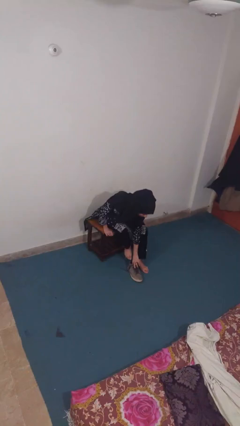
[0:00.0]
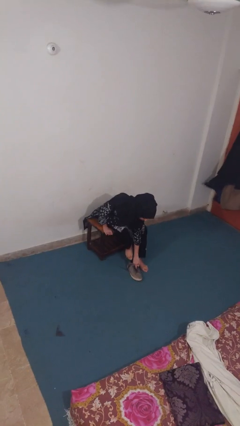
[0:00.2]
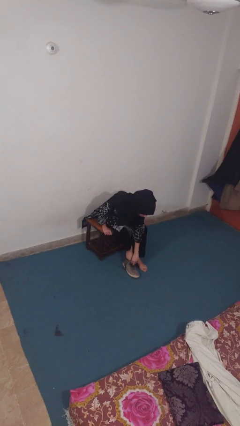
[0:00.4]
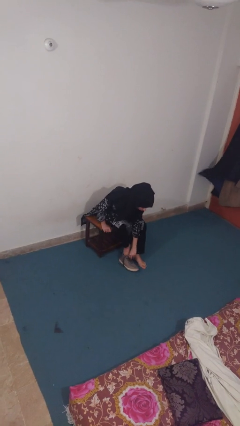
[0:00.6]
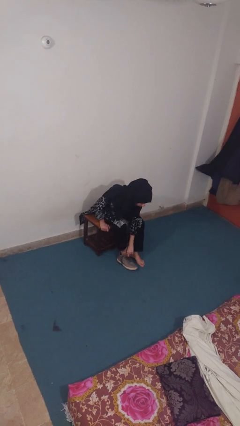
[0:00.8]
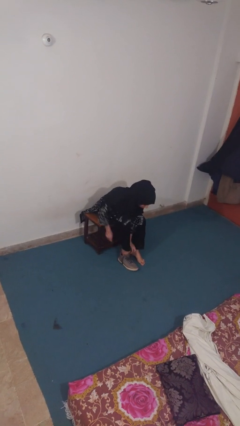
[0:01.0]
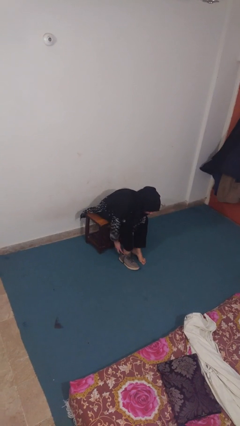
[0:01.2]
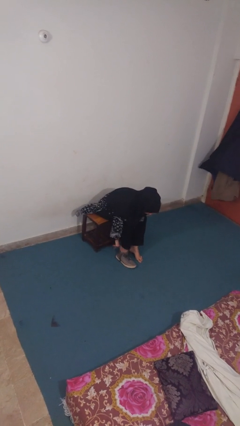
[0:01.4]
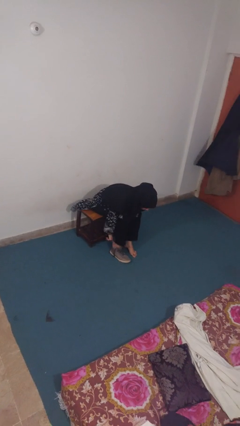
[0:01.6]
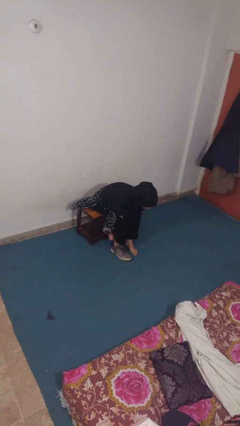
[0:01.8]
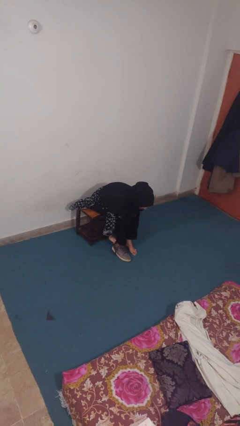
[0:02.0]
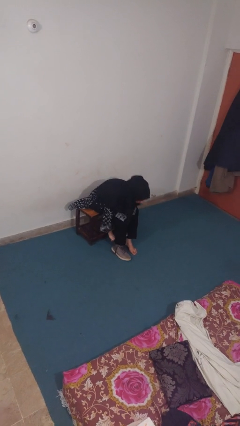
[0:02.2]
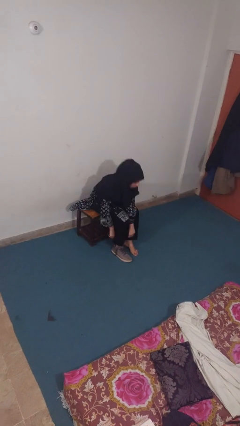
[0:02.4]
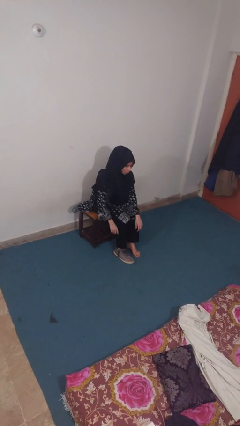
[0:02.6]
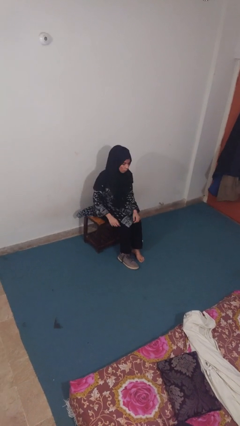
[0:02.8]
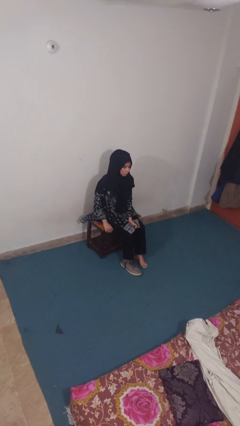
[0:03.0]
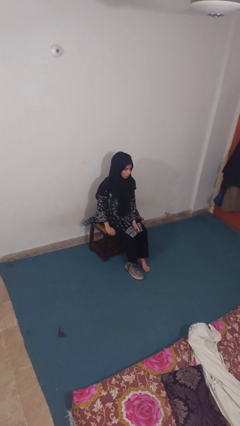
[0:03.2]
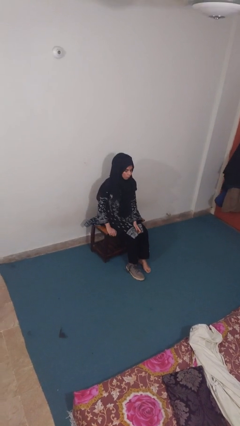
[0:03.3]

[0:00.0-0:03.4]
person puts on boots

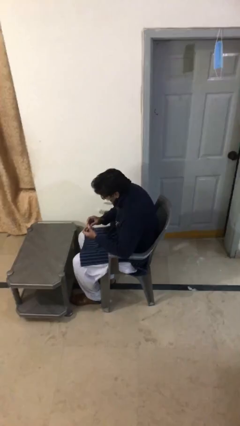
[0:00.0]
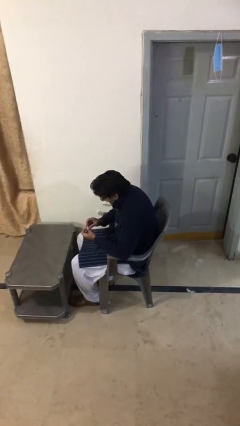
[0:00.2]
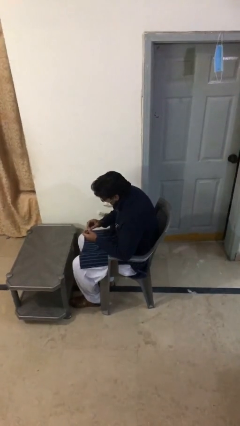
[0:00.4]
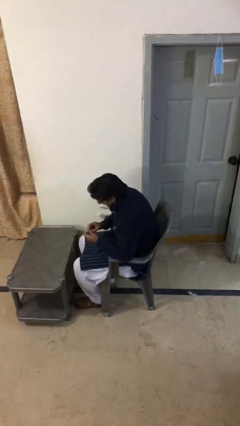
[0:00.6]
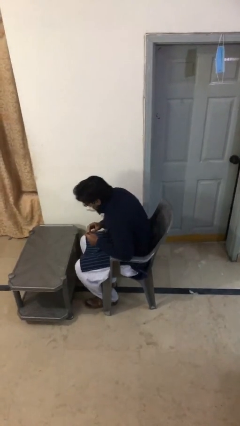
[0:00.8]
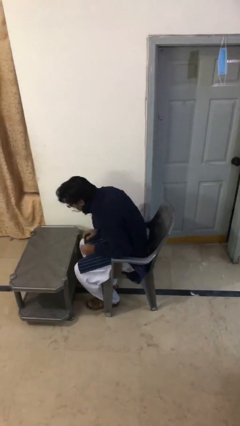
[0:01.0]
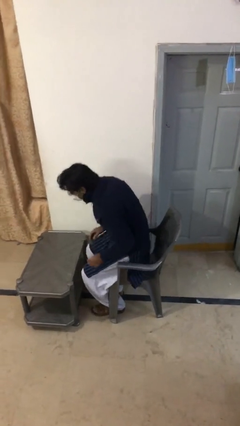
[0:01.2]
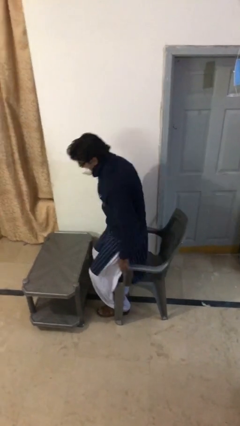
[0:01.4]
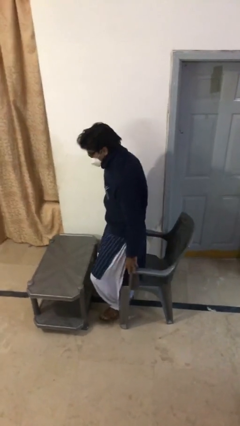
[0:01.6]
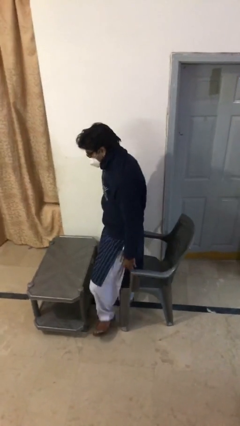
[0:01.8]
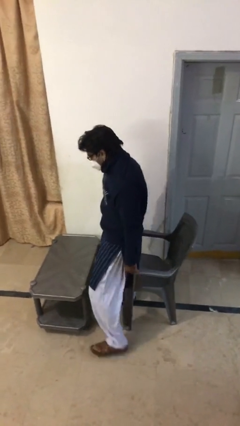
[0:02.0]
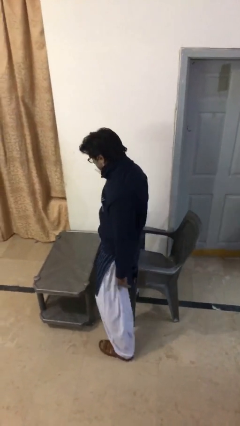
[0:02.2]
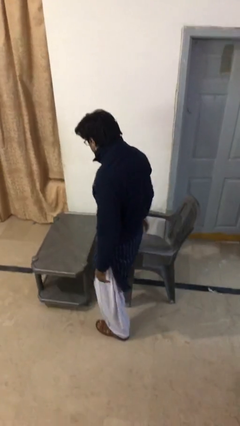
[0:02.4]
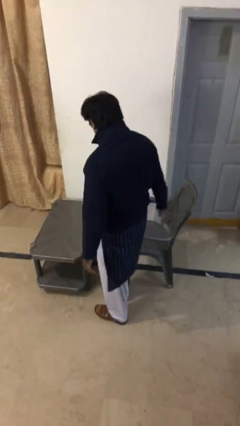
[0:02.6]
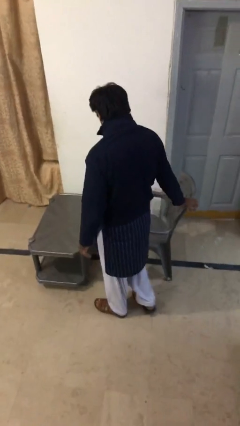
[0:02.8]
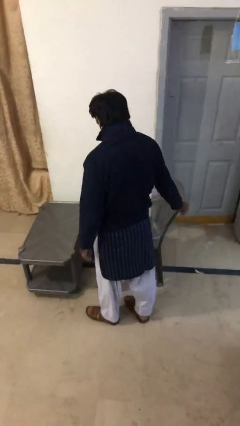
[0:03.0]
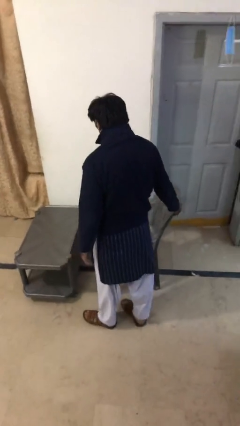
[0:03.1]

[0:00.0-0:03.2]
person stands up

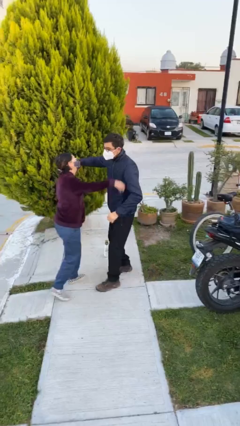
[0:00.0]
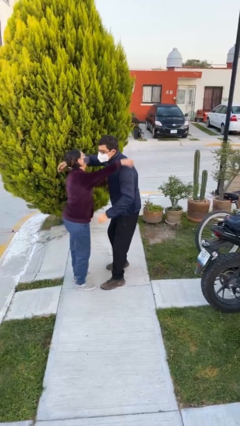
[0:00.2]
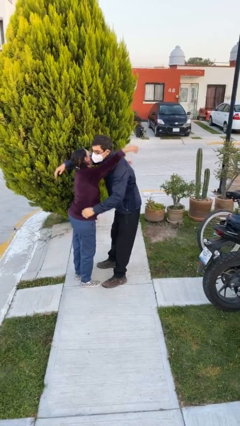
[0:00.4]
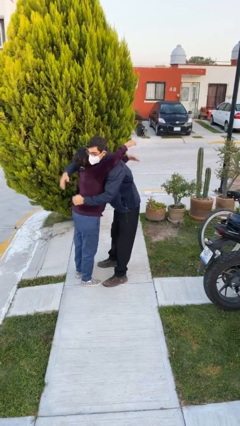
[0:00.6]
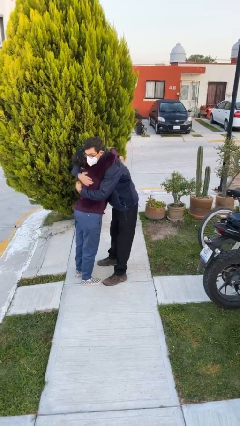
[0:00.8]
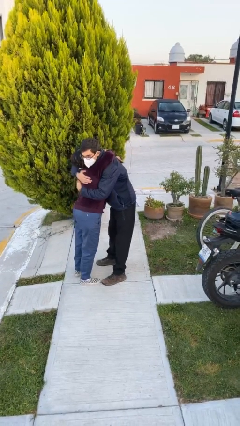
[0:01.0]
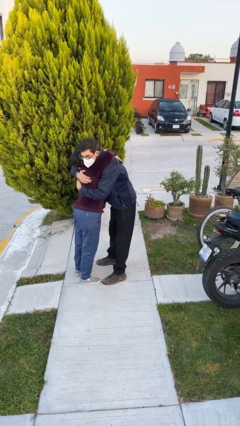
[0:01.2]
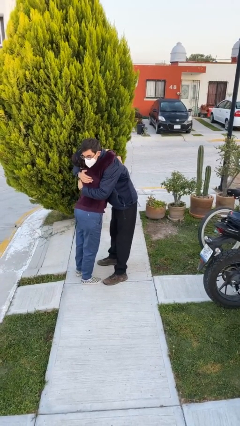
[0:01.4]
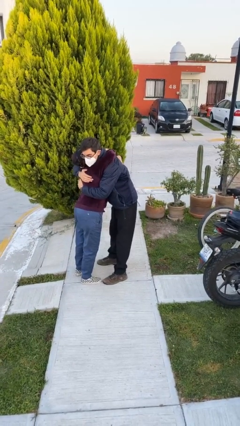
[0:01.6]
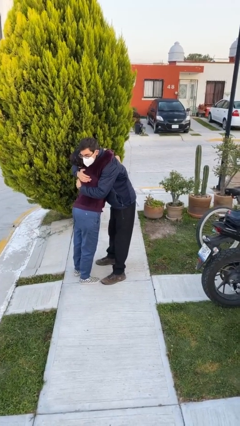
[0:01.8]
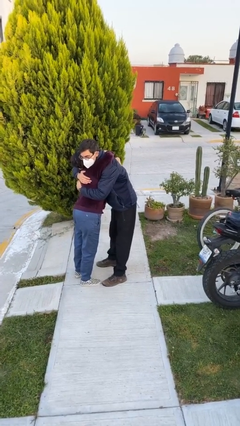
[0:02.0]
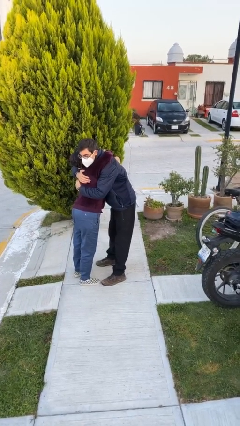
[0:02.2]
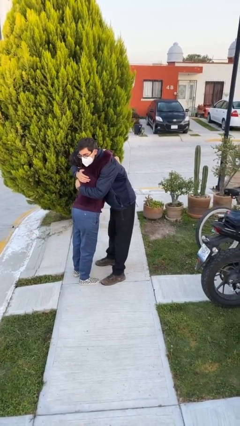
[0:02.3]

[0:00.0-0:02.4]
person embraces person

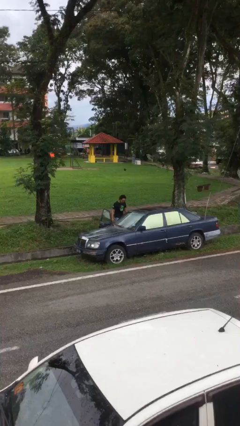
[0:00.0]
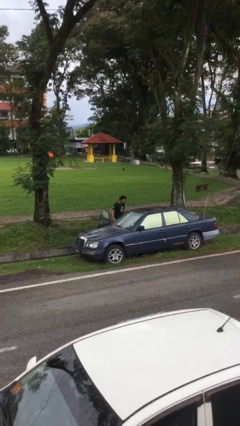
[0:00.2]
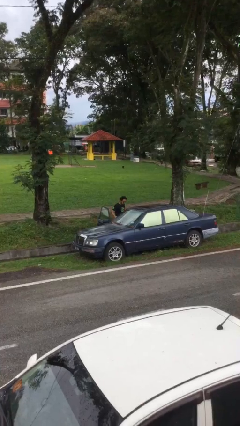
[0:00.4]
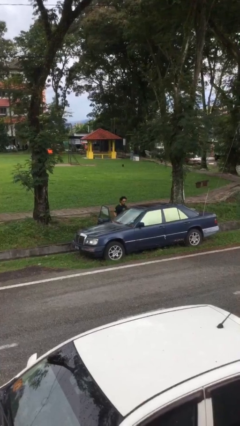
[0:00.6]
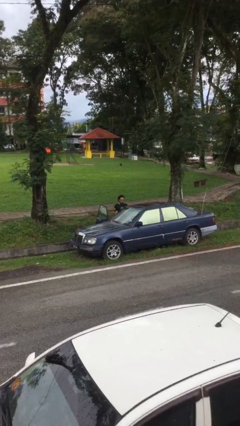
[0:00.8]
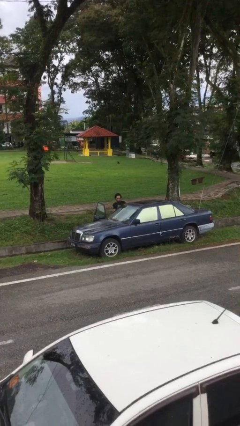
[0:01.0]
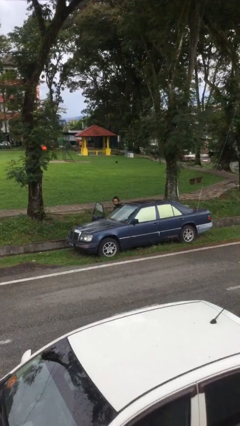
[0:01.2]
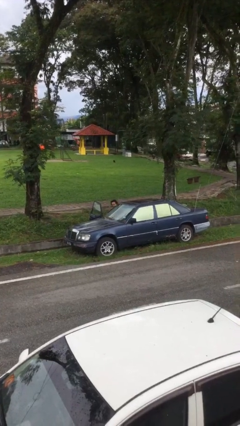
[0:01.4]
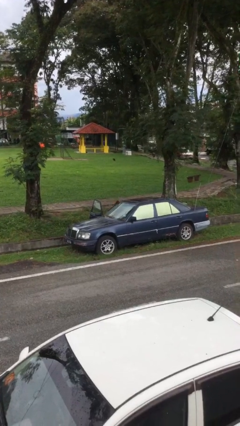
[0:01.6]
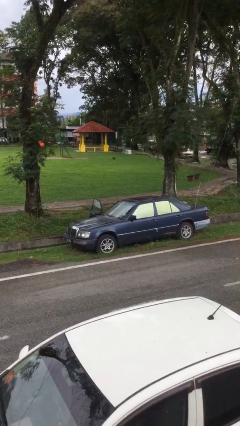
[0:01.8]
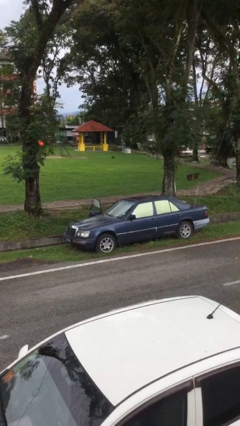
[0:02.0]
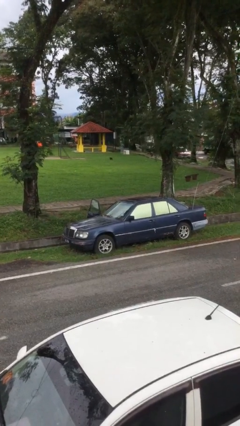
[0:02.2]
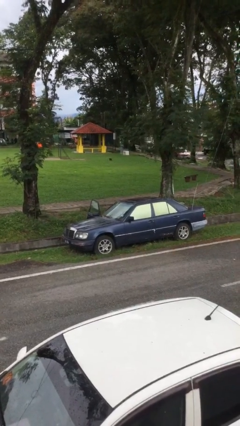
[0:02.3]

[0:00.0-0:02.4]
person enters car

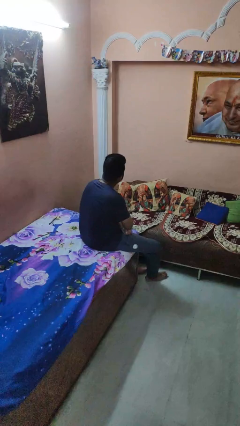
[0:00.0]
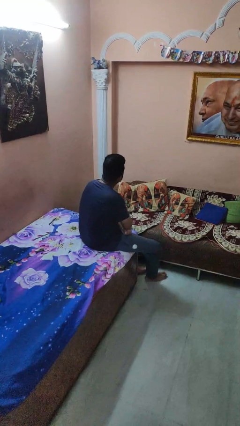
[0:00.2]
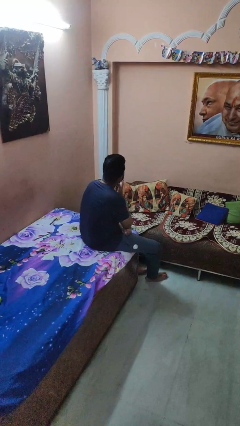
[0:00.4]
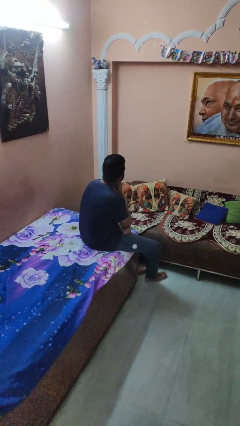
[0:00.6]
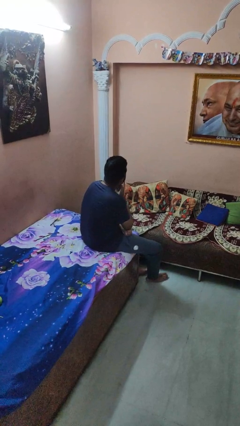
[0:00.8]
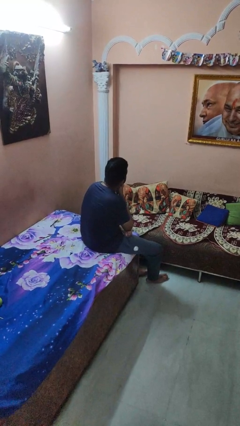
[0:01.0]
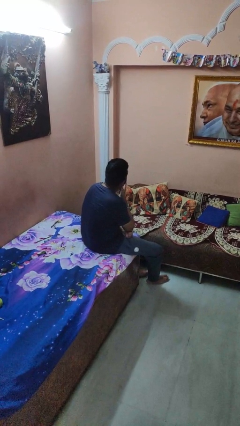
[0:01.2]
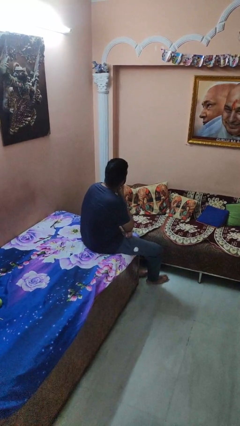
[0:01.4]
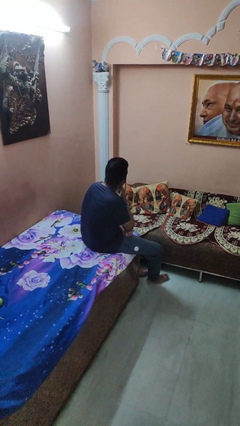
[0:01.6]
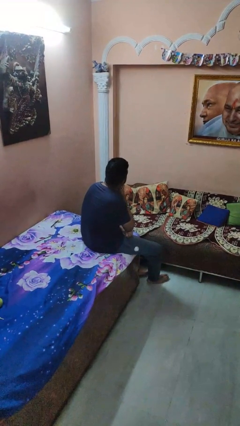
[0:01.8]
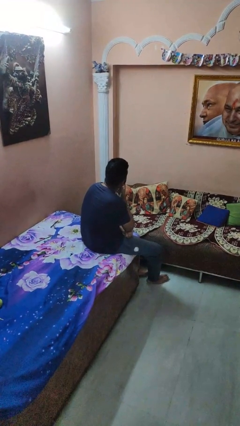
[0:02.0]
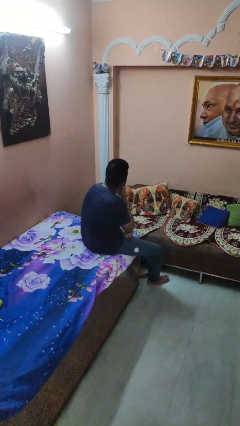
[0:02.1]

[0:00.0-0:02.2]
person strokes chin

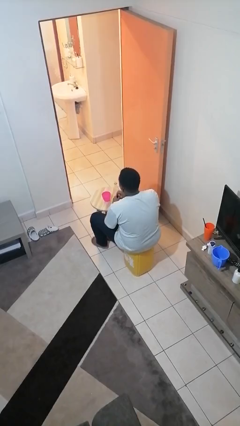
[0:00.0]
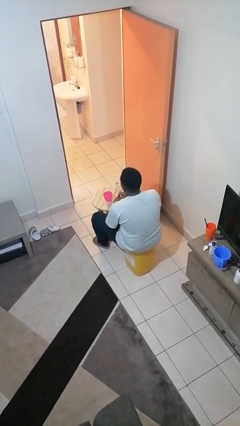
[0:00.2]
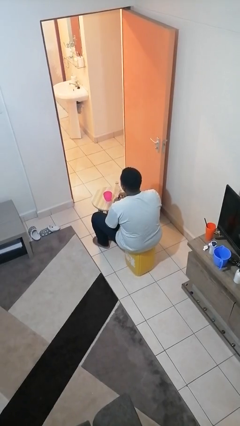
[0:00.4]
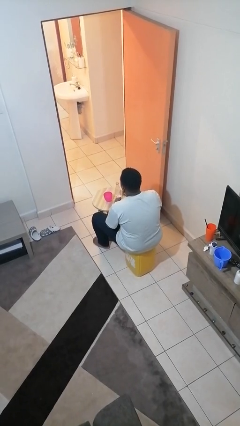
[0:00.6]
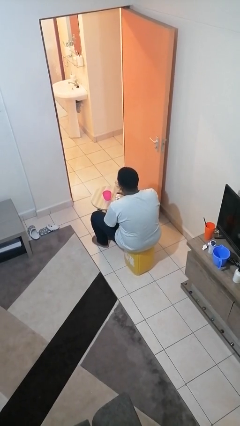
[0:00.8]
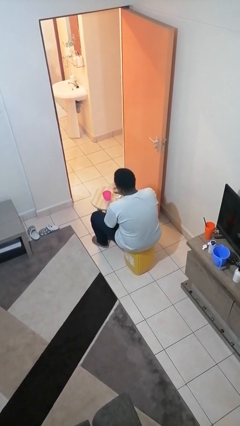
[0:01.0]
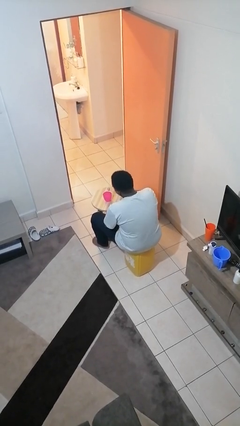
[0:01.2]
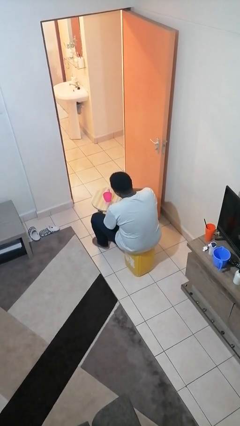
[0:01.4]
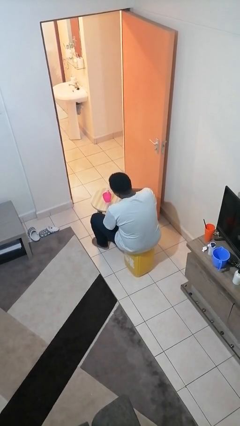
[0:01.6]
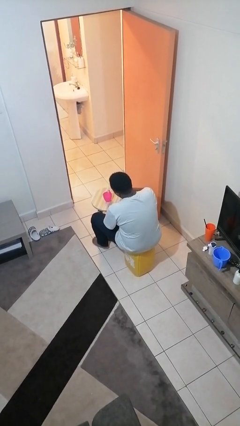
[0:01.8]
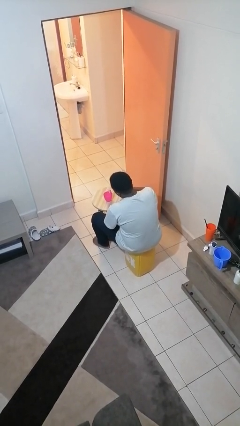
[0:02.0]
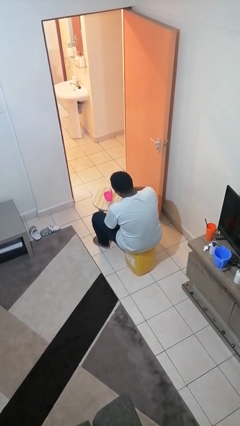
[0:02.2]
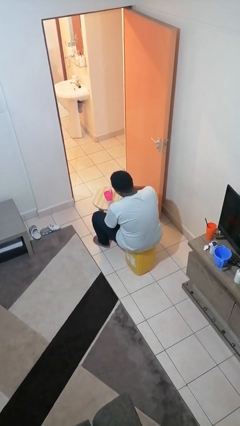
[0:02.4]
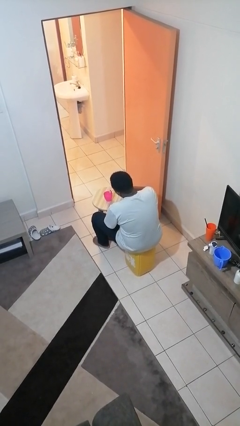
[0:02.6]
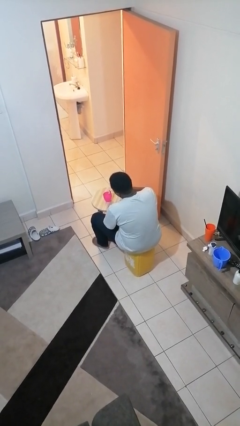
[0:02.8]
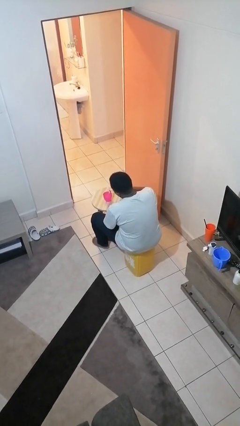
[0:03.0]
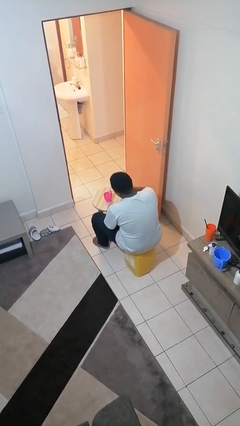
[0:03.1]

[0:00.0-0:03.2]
person pours liquid into cup
